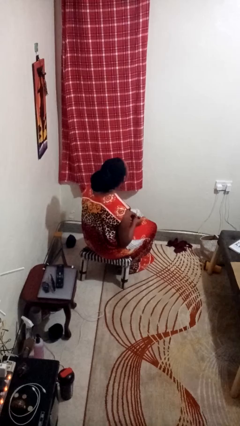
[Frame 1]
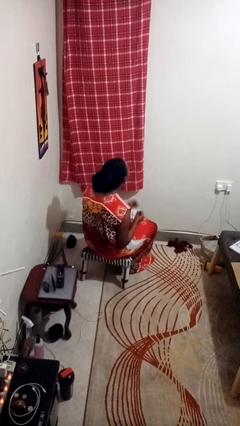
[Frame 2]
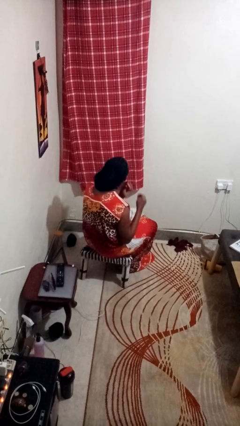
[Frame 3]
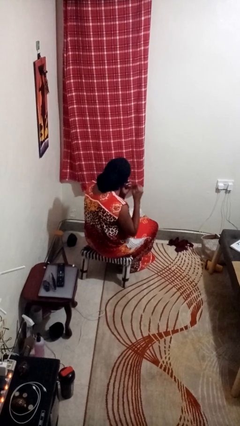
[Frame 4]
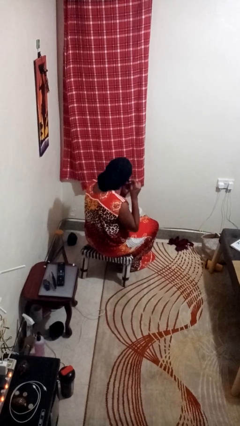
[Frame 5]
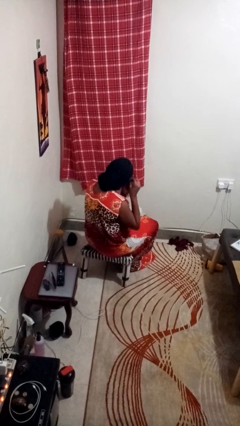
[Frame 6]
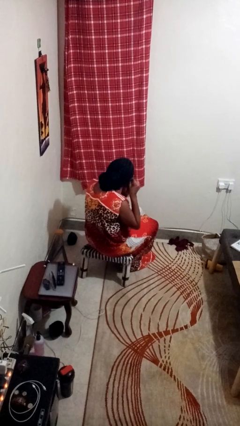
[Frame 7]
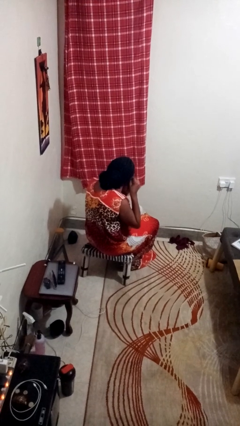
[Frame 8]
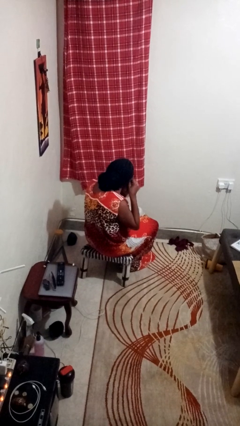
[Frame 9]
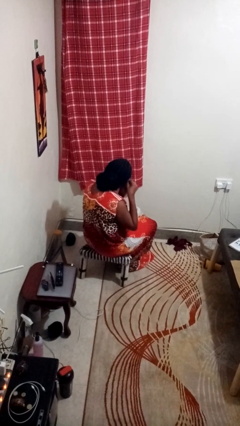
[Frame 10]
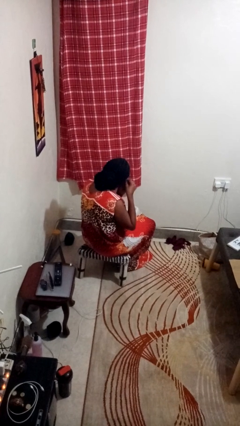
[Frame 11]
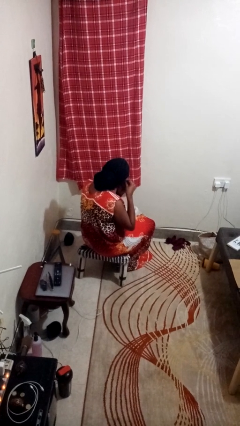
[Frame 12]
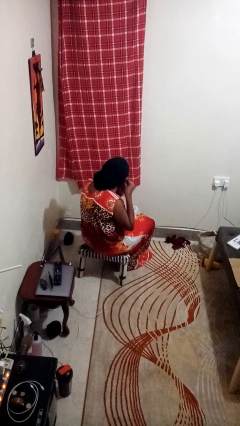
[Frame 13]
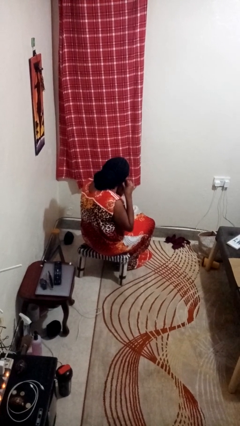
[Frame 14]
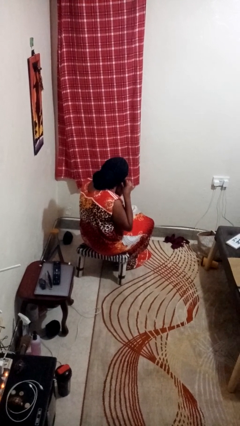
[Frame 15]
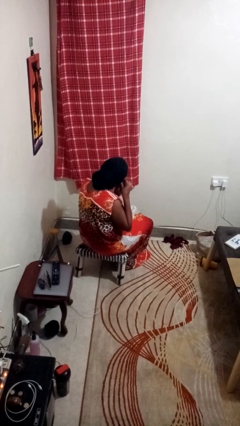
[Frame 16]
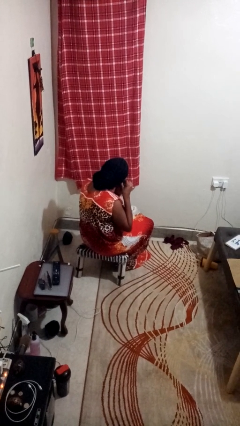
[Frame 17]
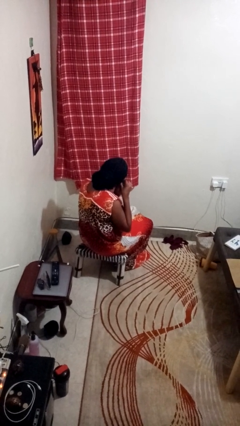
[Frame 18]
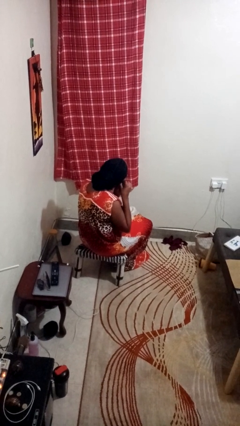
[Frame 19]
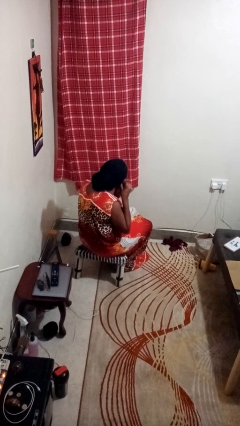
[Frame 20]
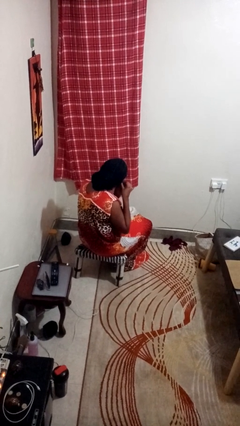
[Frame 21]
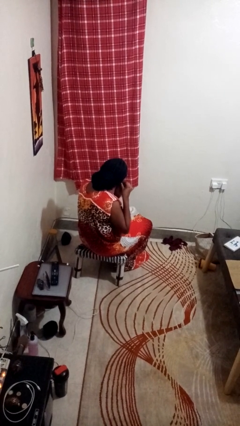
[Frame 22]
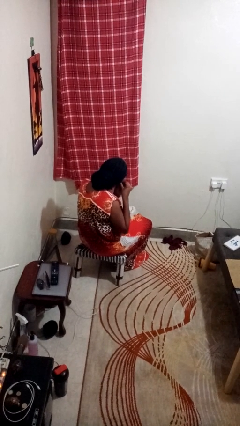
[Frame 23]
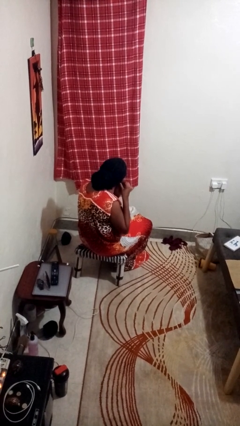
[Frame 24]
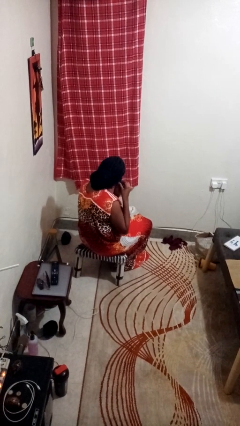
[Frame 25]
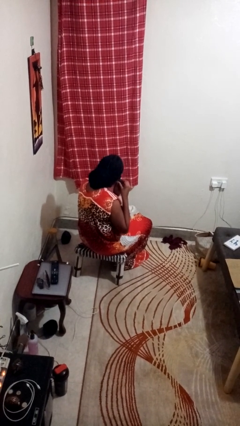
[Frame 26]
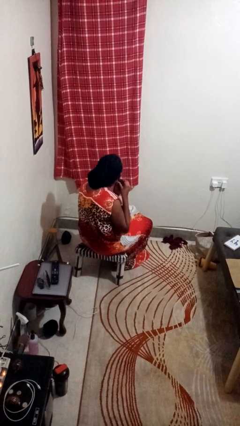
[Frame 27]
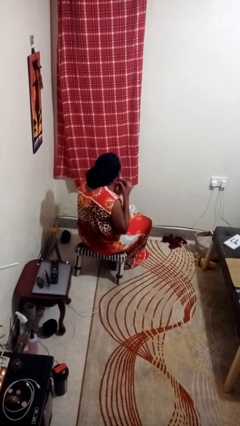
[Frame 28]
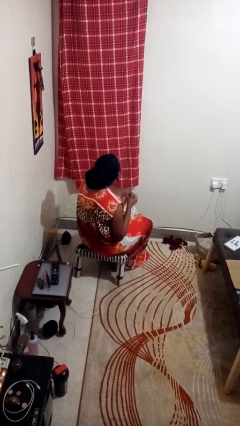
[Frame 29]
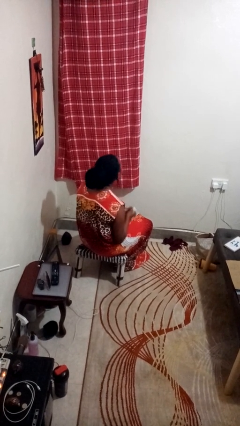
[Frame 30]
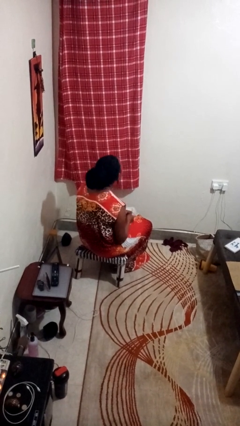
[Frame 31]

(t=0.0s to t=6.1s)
person puts on earrings

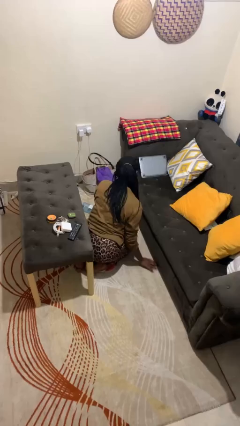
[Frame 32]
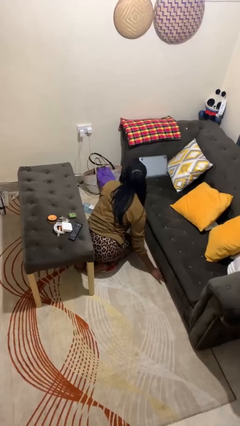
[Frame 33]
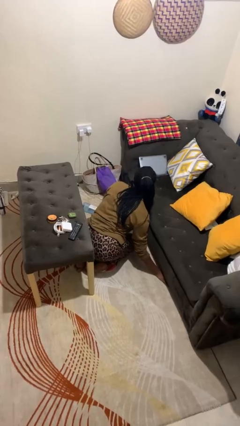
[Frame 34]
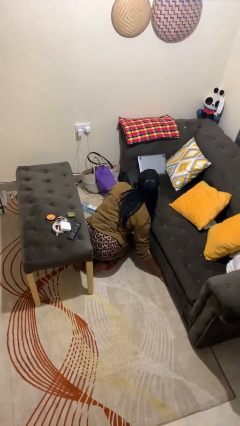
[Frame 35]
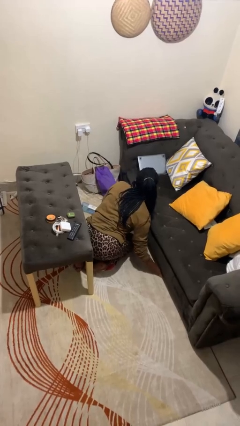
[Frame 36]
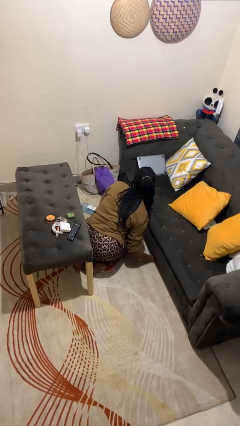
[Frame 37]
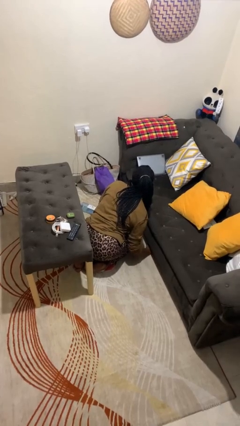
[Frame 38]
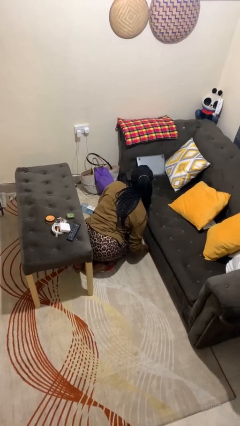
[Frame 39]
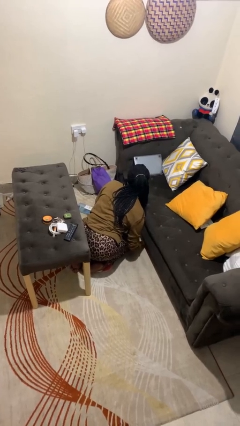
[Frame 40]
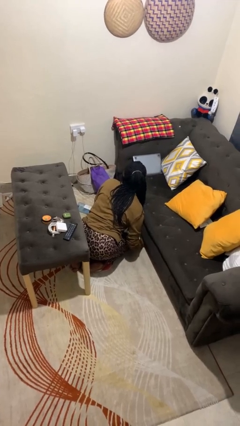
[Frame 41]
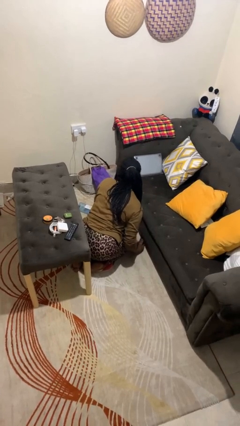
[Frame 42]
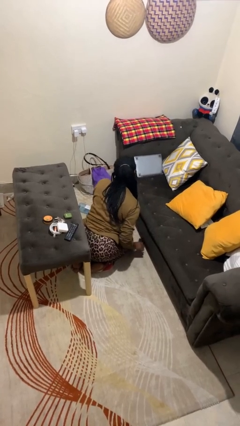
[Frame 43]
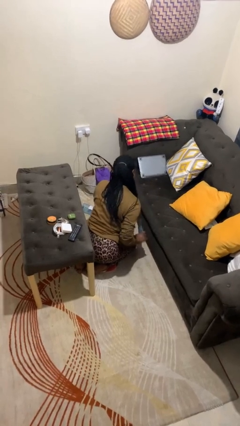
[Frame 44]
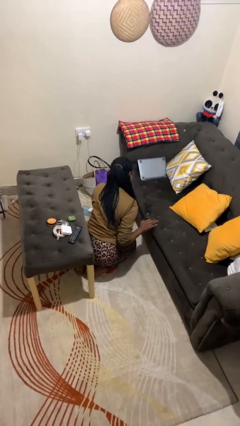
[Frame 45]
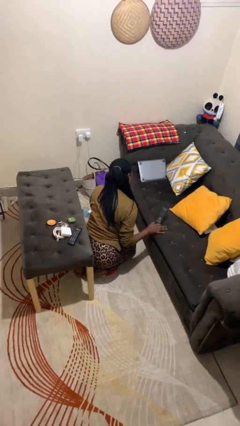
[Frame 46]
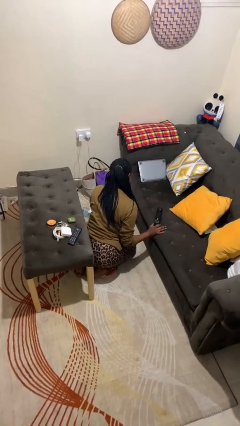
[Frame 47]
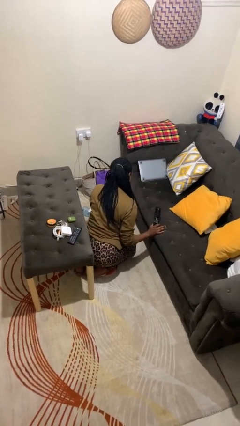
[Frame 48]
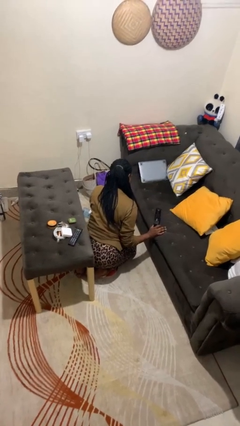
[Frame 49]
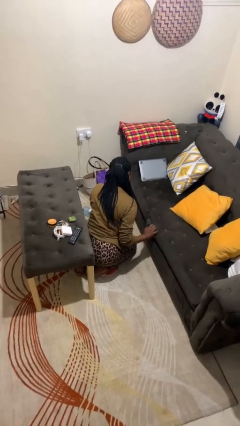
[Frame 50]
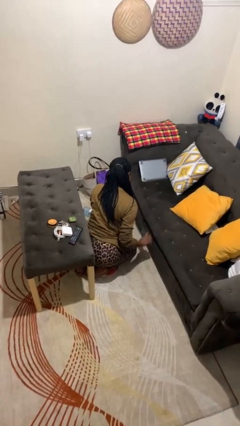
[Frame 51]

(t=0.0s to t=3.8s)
person searches under couch

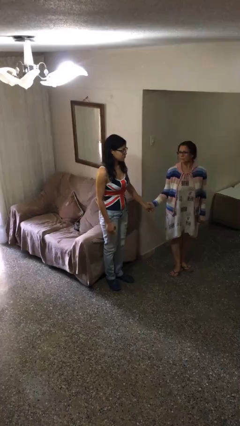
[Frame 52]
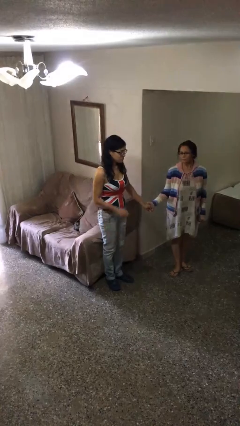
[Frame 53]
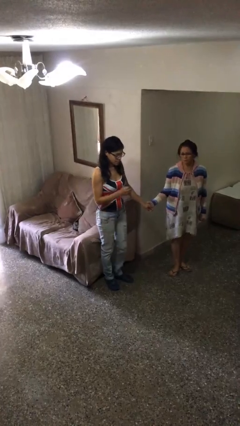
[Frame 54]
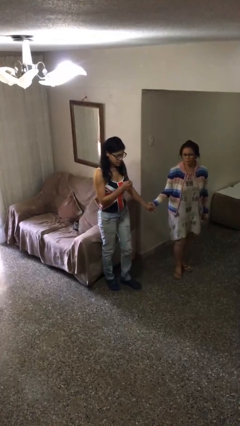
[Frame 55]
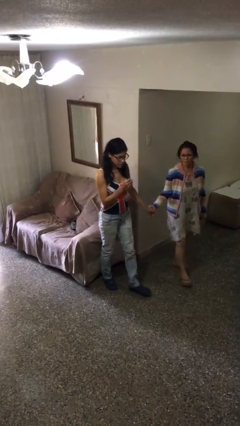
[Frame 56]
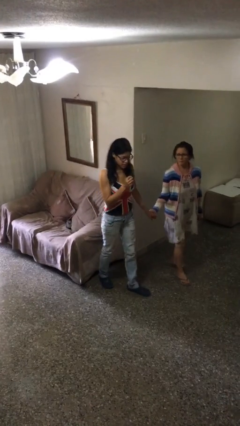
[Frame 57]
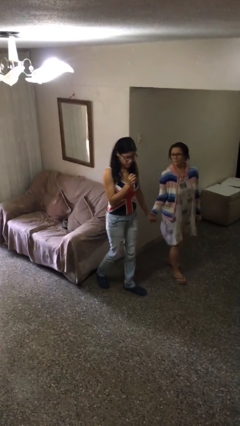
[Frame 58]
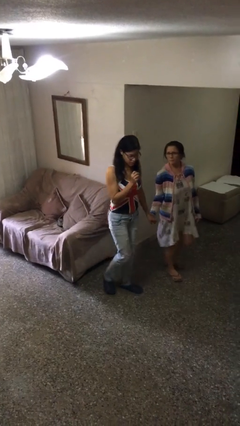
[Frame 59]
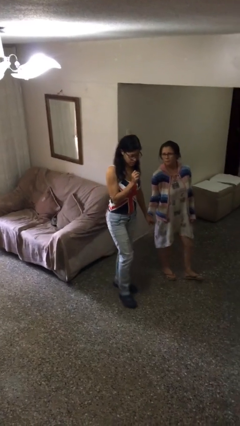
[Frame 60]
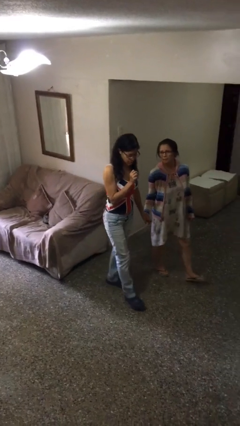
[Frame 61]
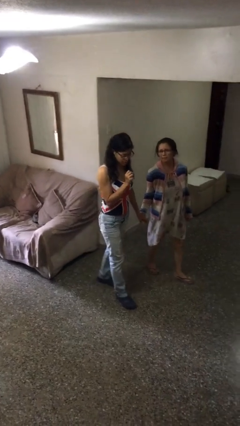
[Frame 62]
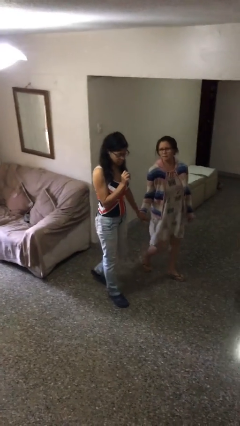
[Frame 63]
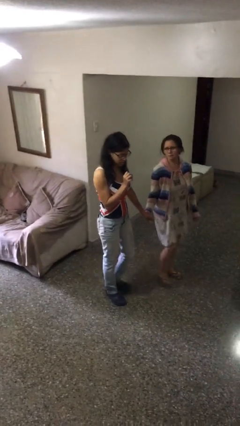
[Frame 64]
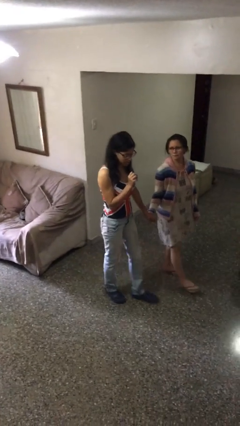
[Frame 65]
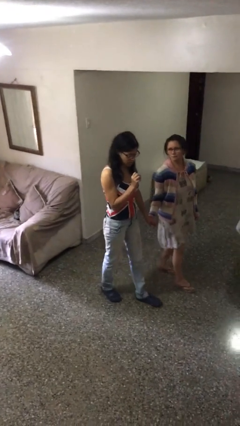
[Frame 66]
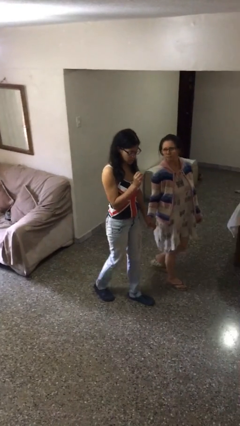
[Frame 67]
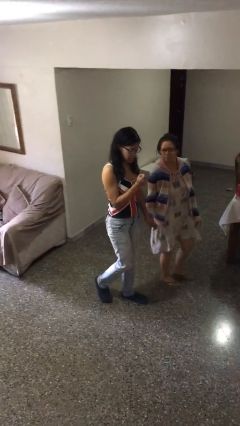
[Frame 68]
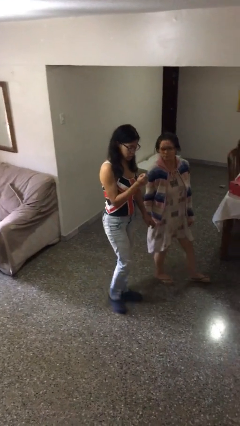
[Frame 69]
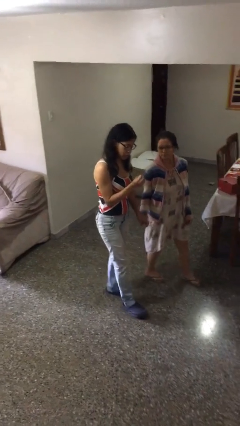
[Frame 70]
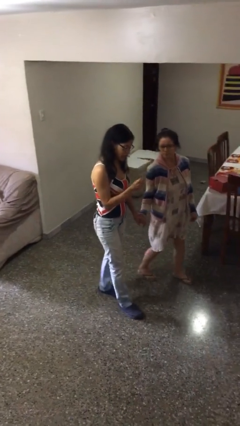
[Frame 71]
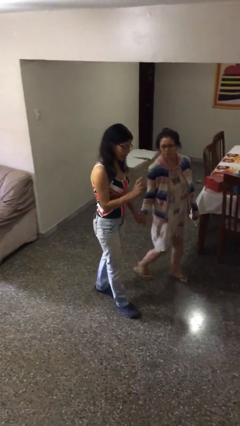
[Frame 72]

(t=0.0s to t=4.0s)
person holds hand

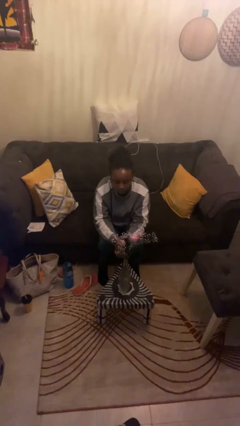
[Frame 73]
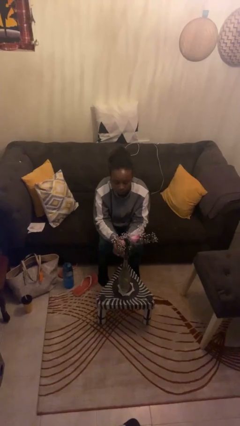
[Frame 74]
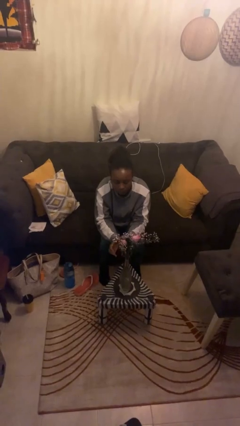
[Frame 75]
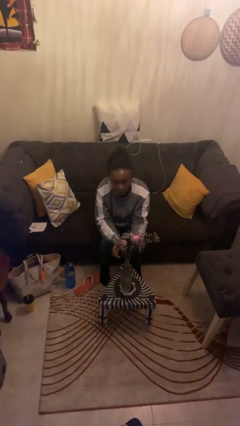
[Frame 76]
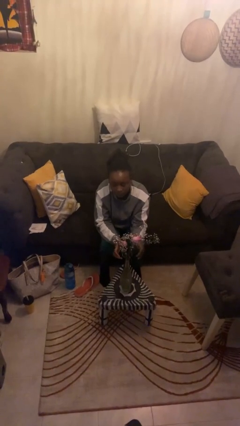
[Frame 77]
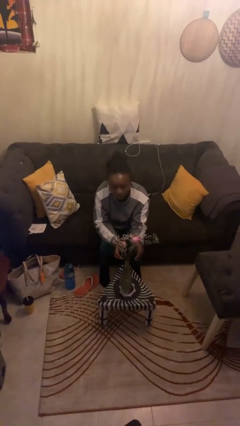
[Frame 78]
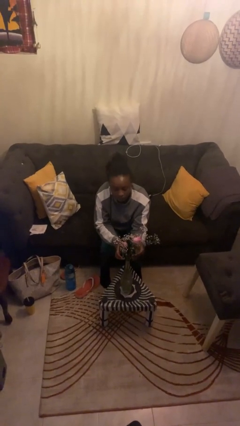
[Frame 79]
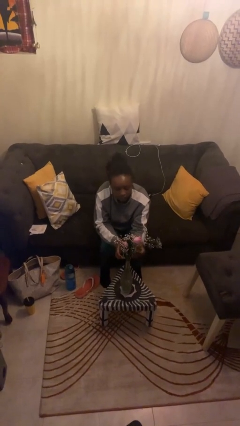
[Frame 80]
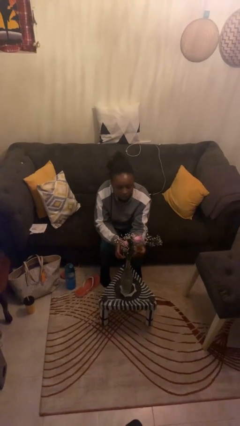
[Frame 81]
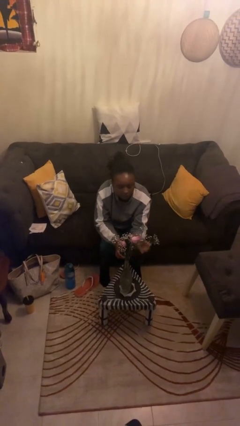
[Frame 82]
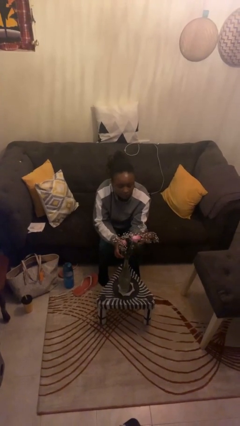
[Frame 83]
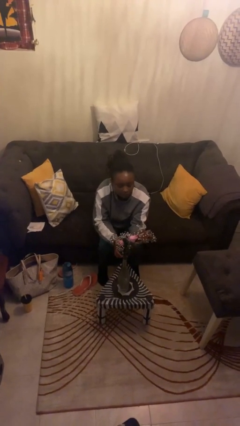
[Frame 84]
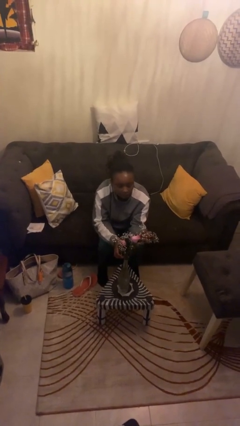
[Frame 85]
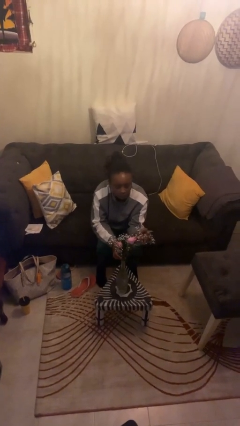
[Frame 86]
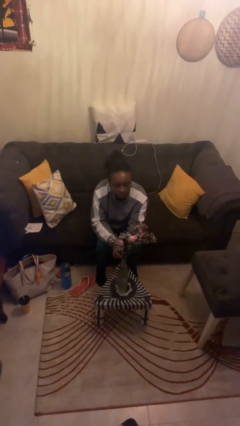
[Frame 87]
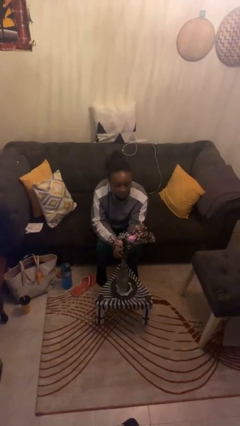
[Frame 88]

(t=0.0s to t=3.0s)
person arranges flowers in vase

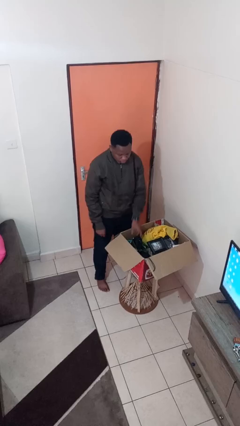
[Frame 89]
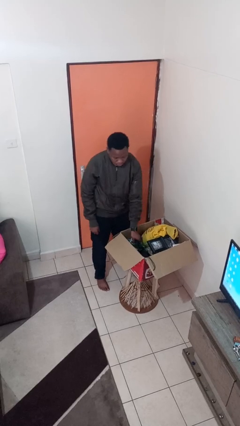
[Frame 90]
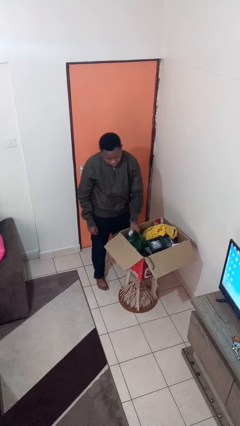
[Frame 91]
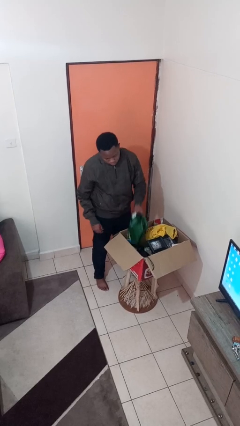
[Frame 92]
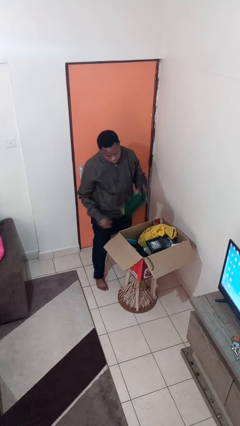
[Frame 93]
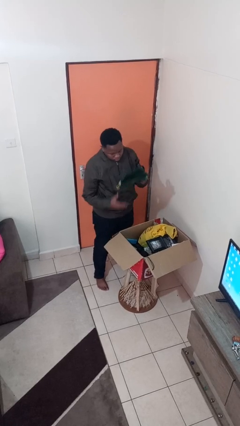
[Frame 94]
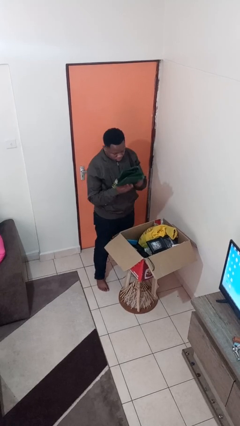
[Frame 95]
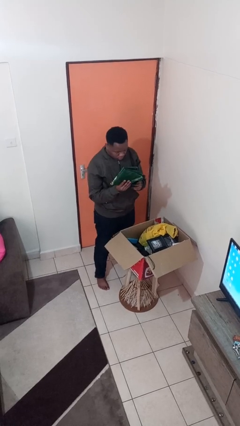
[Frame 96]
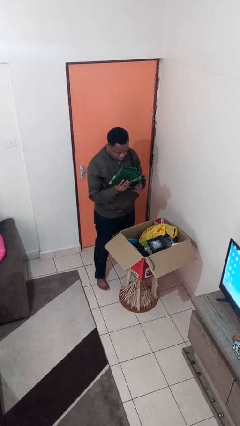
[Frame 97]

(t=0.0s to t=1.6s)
person takes object from box
